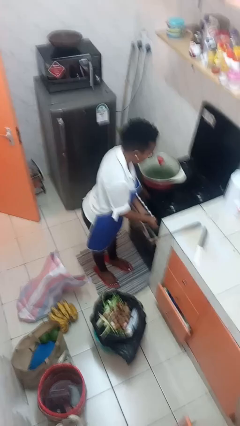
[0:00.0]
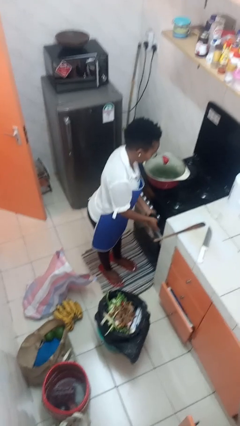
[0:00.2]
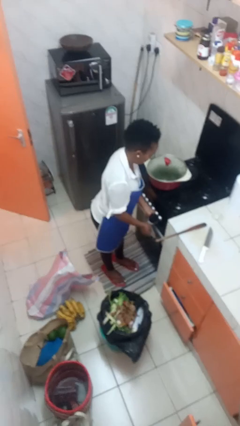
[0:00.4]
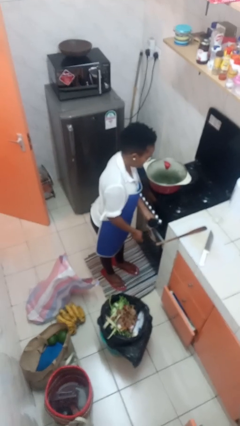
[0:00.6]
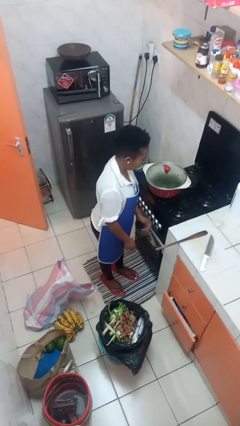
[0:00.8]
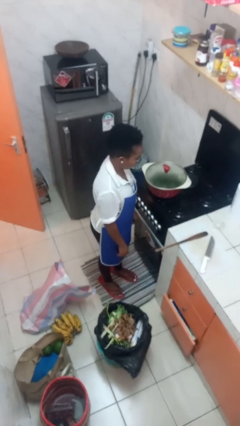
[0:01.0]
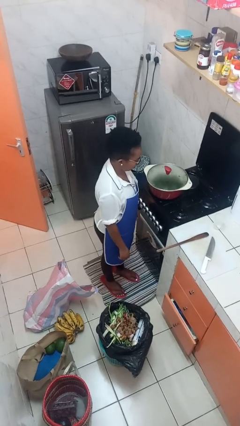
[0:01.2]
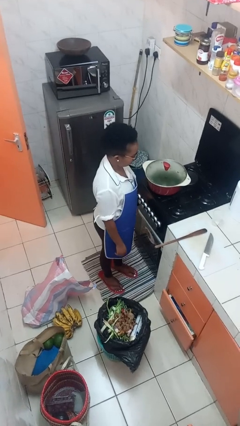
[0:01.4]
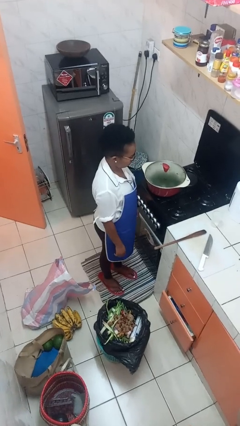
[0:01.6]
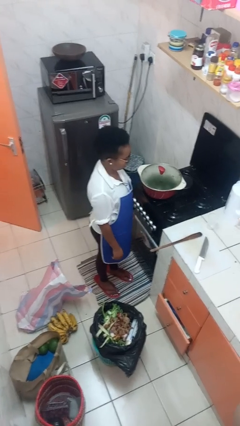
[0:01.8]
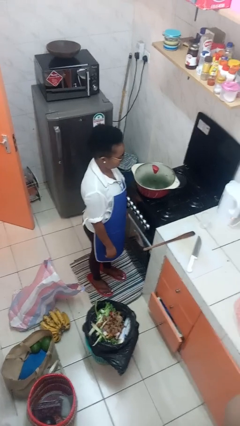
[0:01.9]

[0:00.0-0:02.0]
person turns off stovetop

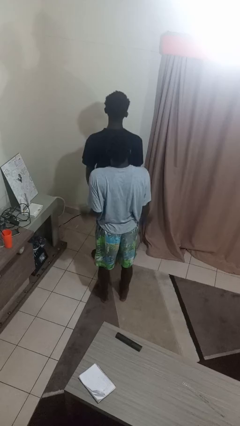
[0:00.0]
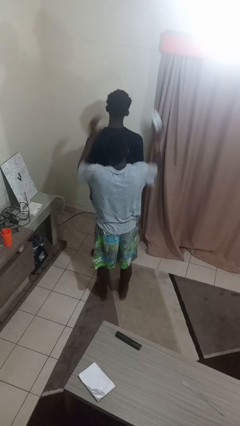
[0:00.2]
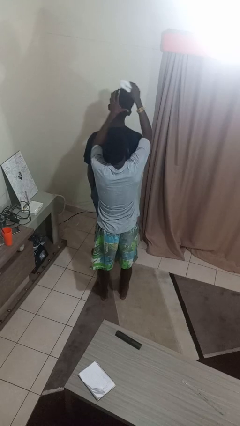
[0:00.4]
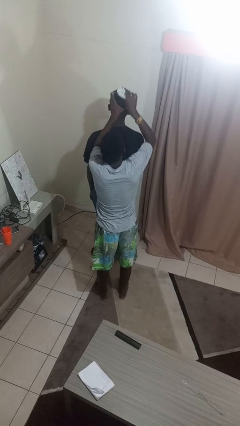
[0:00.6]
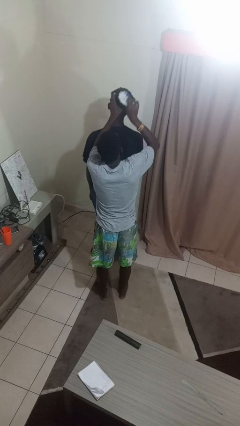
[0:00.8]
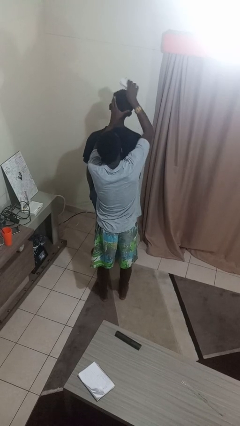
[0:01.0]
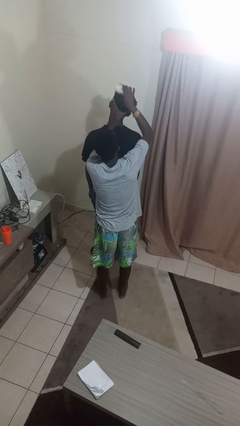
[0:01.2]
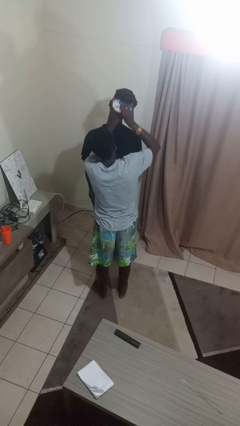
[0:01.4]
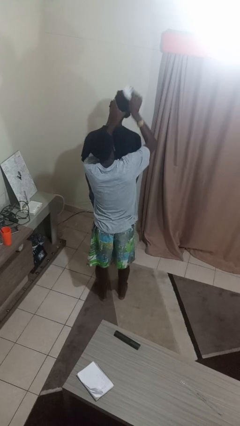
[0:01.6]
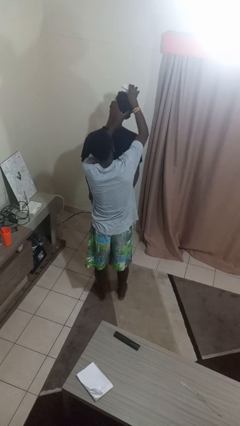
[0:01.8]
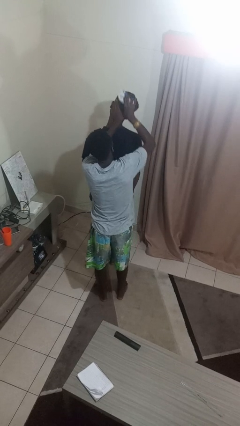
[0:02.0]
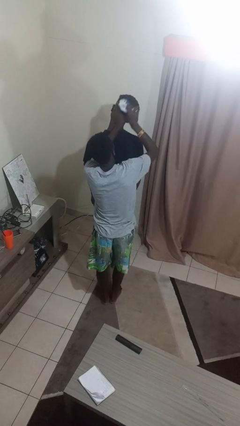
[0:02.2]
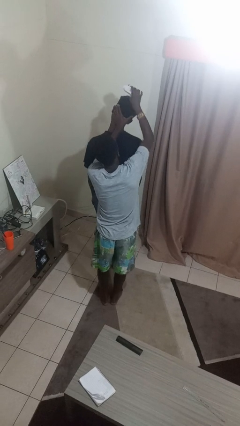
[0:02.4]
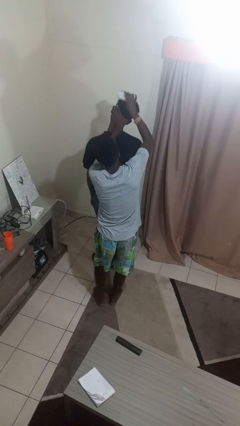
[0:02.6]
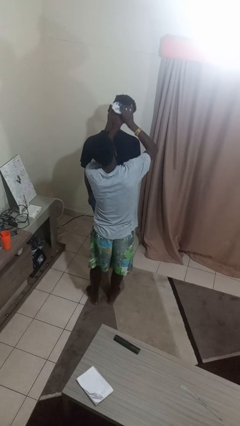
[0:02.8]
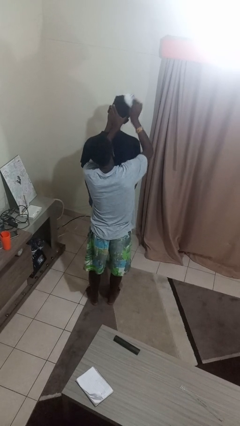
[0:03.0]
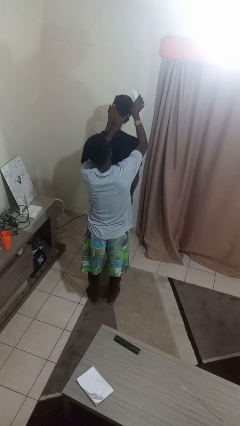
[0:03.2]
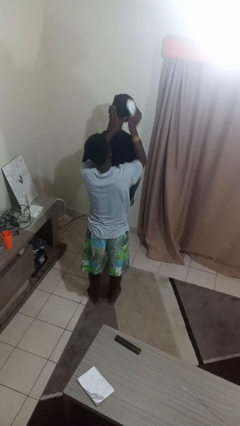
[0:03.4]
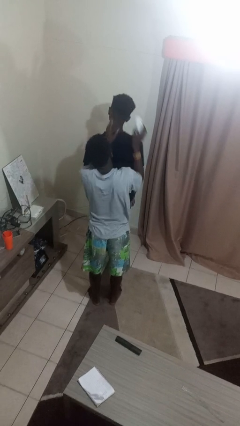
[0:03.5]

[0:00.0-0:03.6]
person brushes hair of person

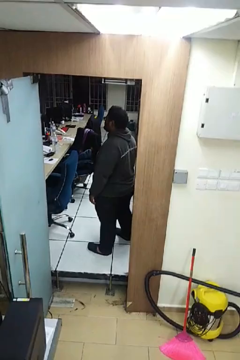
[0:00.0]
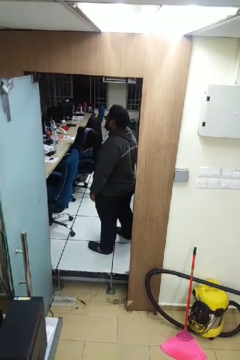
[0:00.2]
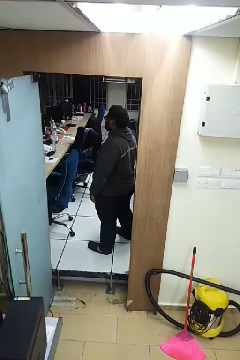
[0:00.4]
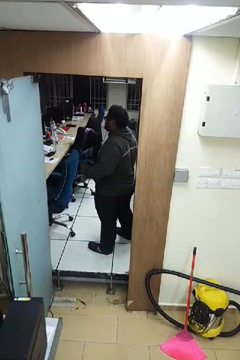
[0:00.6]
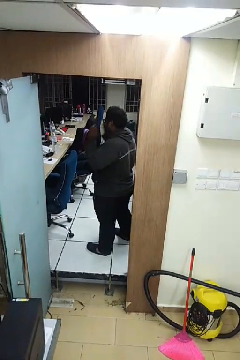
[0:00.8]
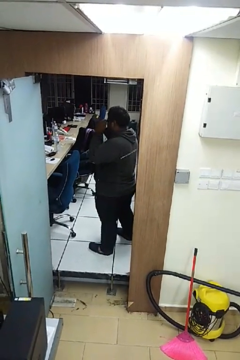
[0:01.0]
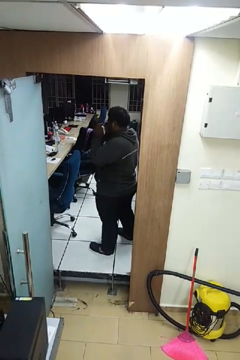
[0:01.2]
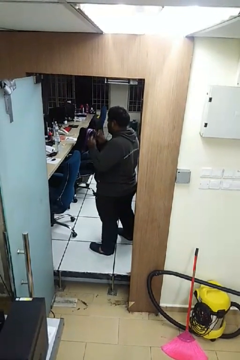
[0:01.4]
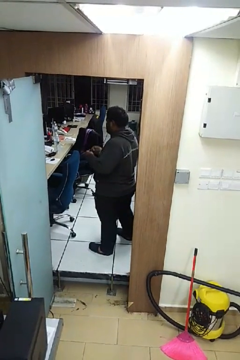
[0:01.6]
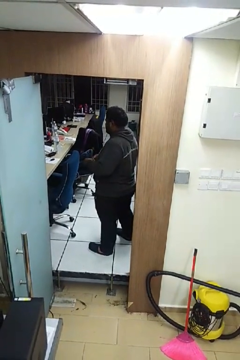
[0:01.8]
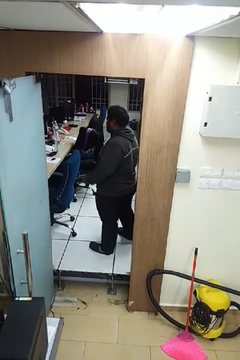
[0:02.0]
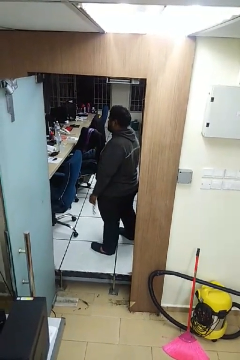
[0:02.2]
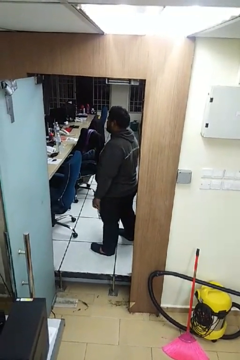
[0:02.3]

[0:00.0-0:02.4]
person takes off glasses

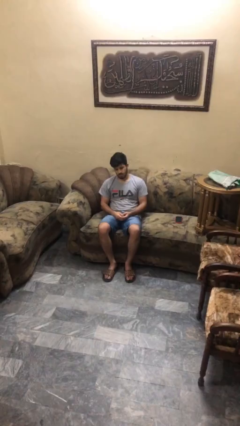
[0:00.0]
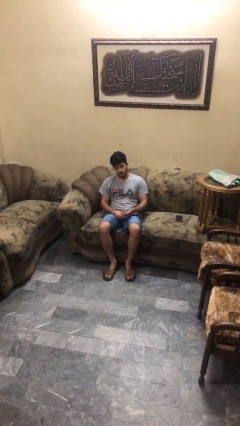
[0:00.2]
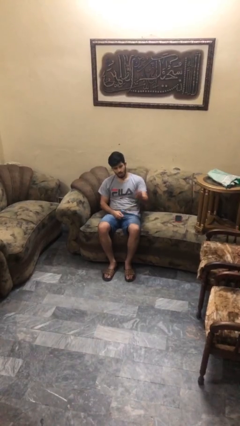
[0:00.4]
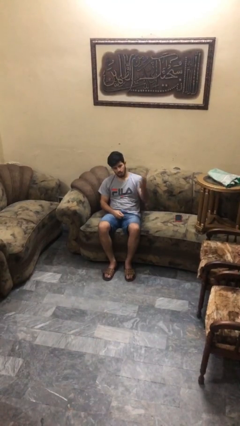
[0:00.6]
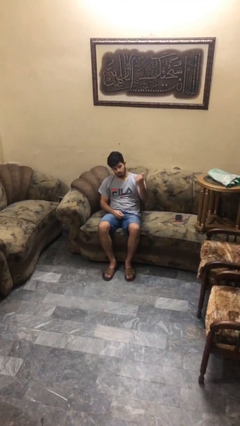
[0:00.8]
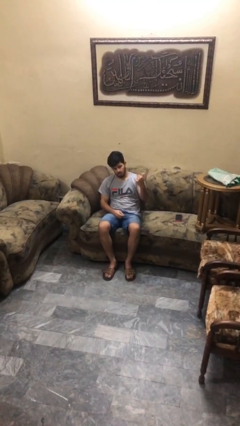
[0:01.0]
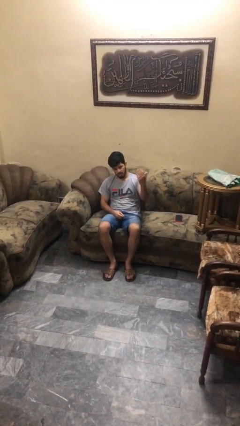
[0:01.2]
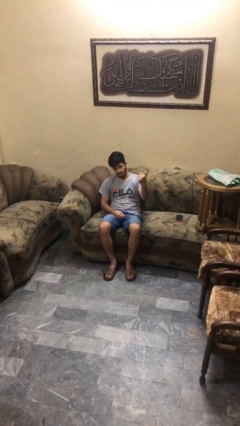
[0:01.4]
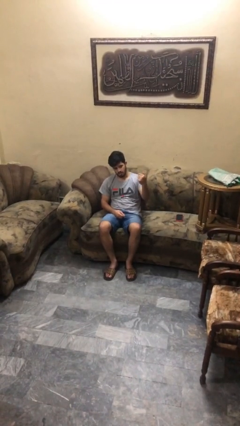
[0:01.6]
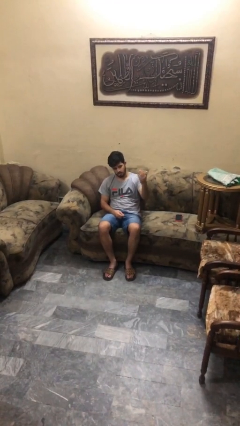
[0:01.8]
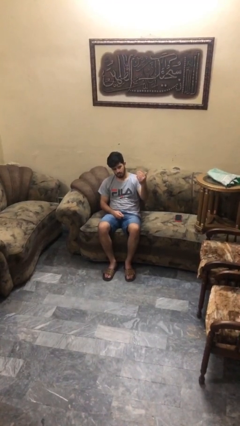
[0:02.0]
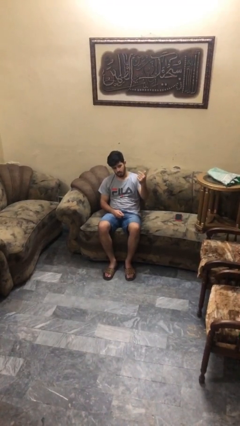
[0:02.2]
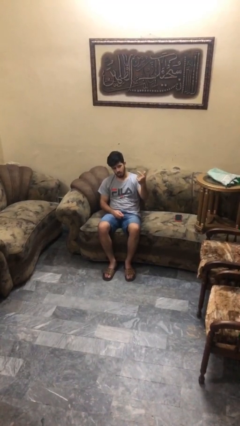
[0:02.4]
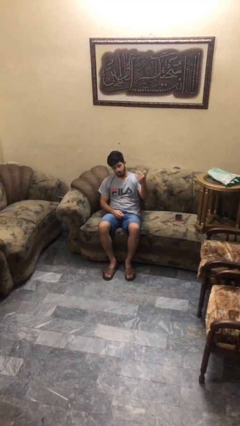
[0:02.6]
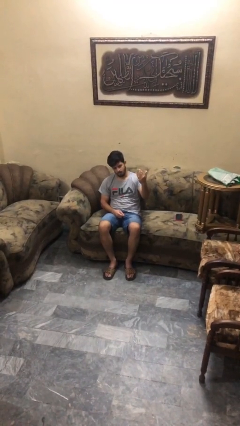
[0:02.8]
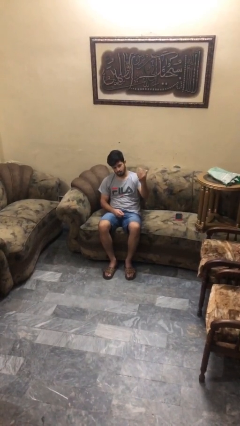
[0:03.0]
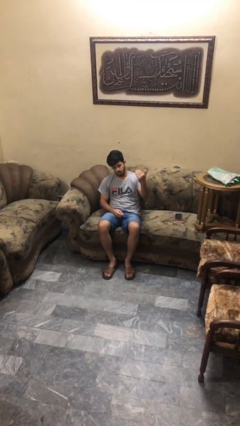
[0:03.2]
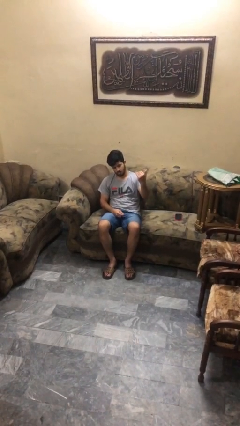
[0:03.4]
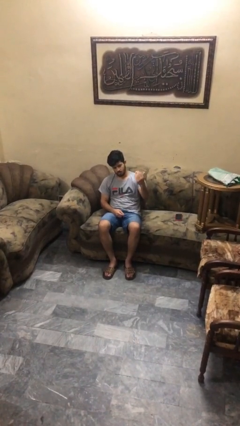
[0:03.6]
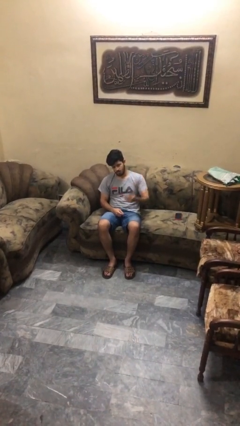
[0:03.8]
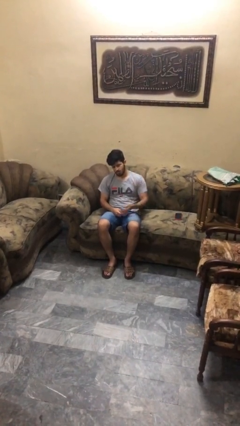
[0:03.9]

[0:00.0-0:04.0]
person gestures come here

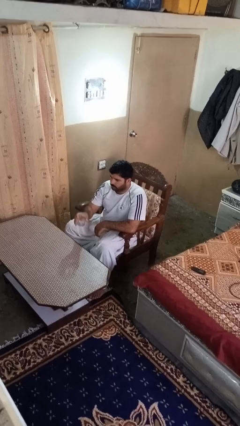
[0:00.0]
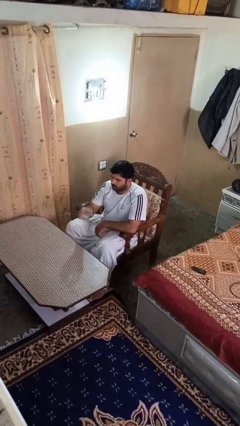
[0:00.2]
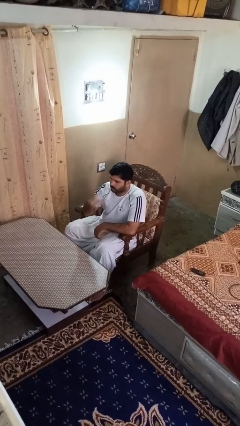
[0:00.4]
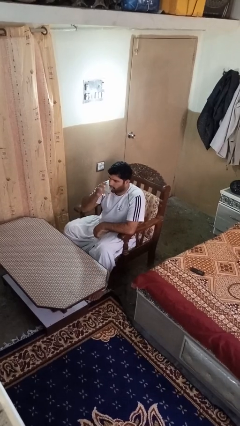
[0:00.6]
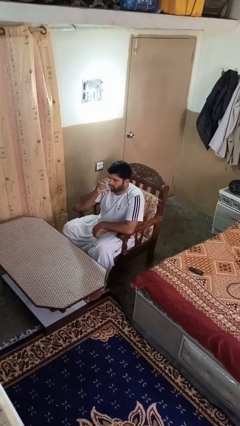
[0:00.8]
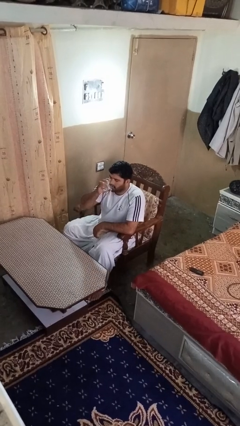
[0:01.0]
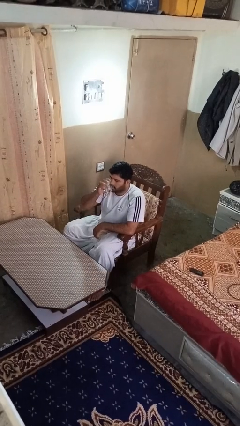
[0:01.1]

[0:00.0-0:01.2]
person drinks from shotglass

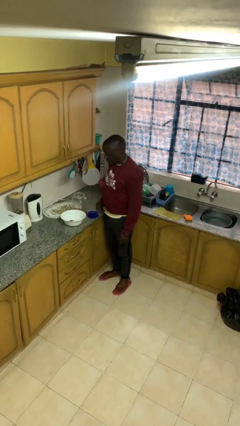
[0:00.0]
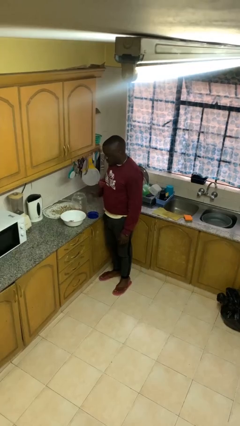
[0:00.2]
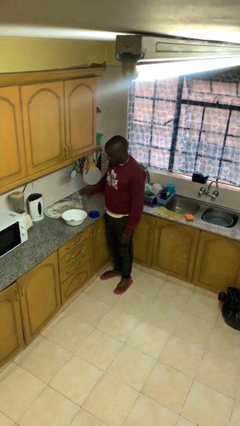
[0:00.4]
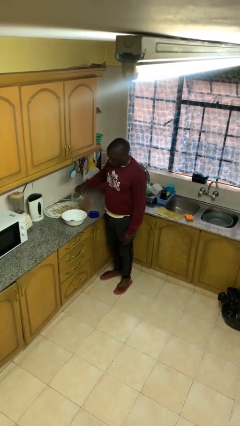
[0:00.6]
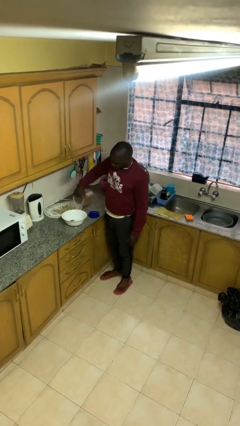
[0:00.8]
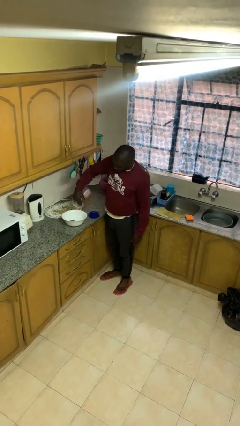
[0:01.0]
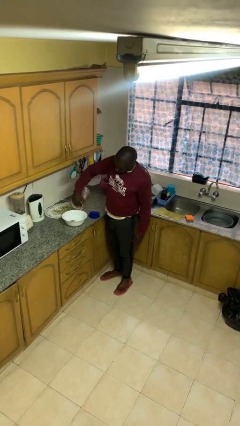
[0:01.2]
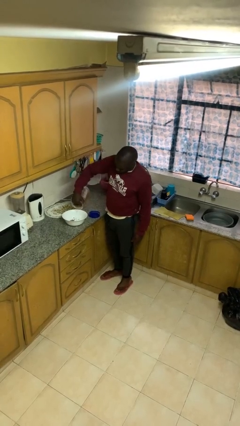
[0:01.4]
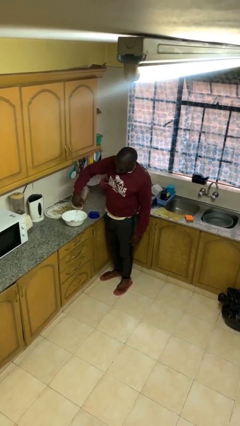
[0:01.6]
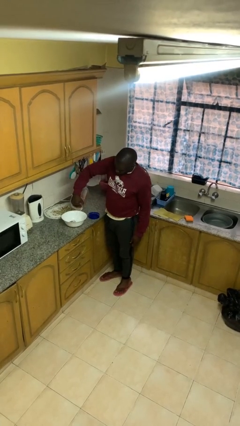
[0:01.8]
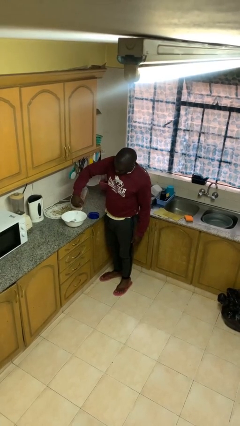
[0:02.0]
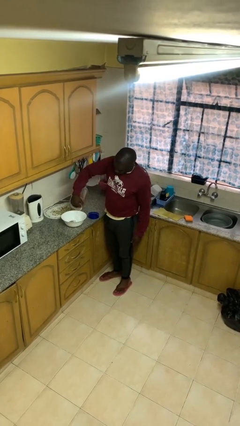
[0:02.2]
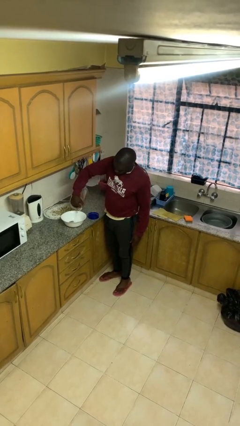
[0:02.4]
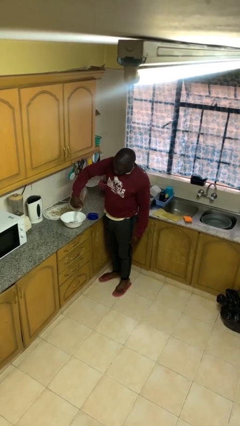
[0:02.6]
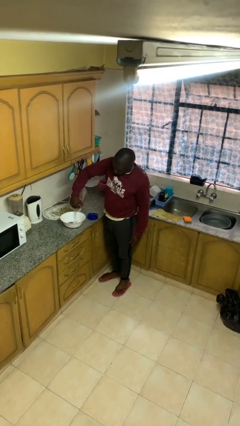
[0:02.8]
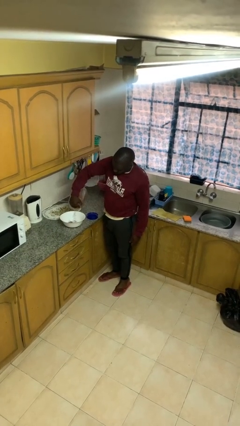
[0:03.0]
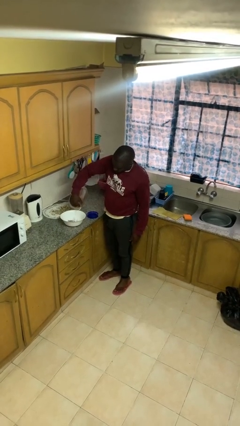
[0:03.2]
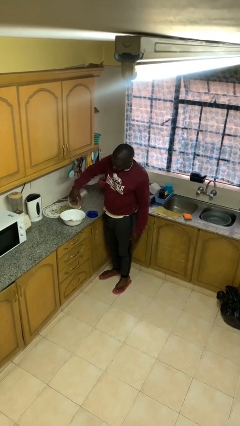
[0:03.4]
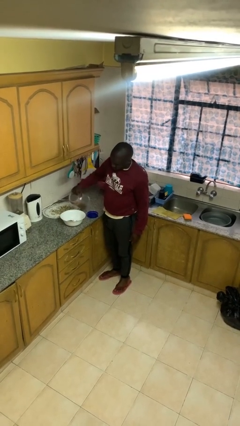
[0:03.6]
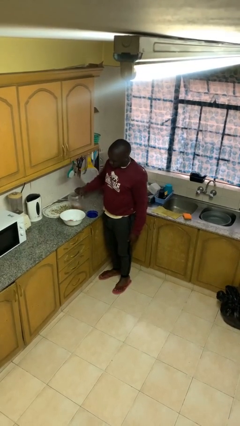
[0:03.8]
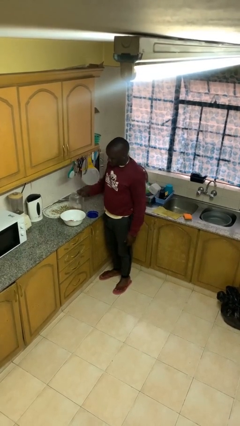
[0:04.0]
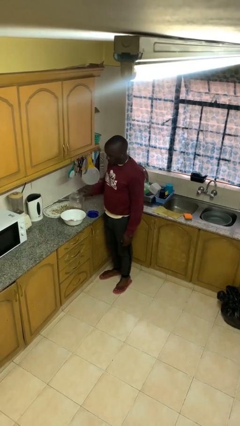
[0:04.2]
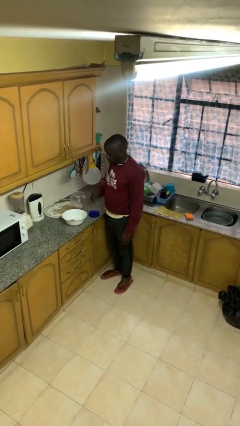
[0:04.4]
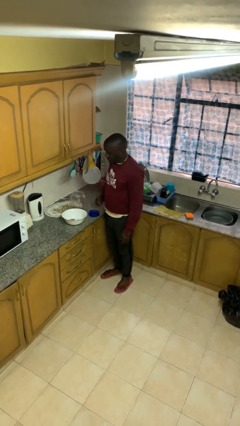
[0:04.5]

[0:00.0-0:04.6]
person pours into bowl
